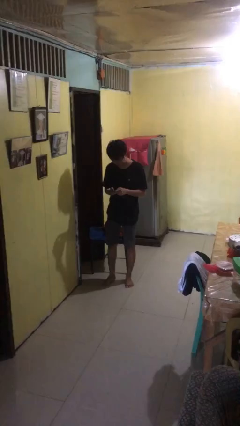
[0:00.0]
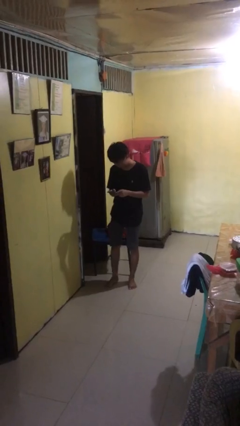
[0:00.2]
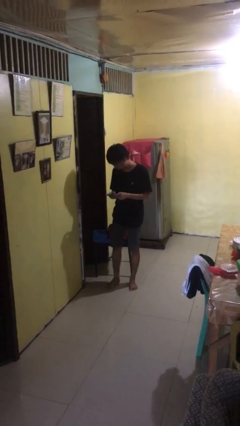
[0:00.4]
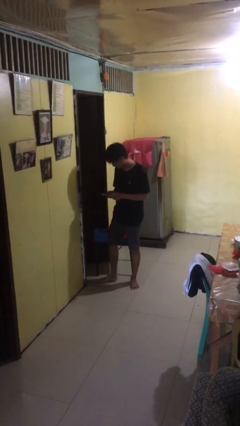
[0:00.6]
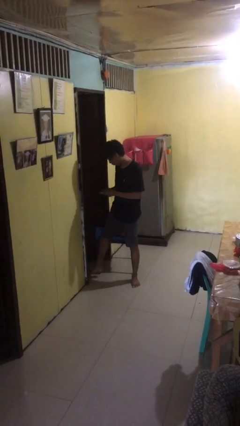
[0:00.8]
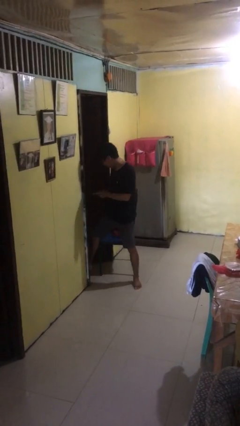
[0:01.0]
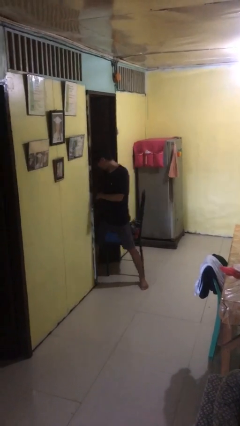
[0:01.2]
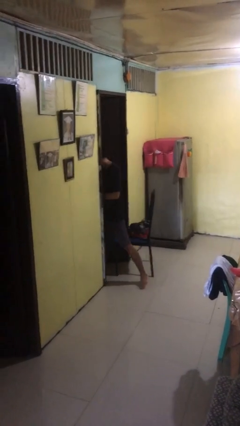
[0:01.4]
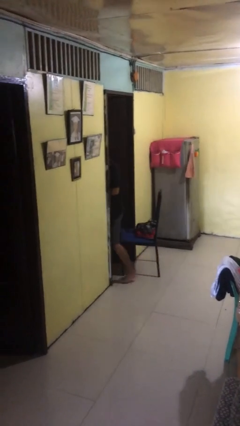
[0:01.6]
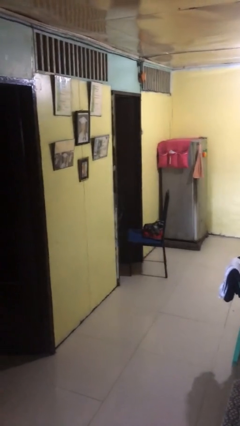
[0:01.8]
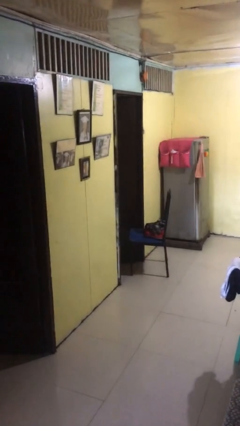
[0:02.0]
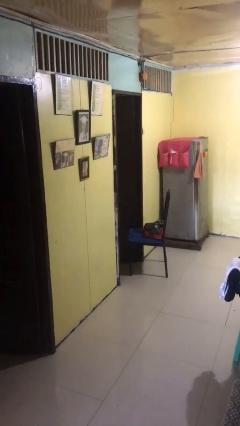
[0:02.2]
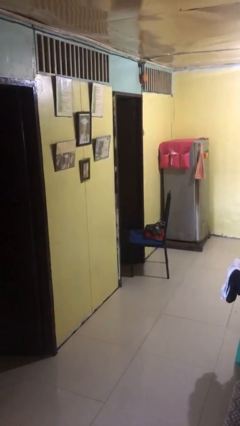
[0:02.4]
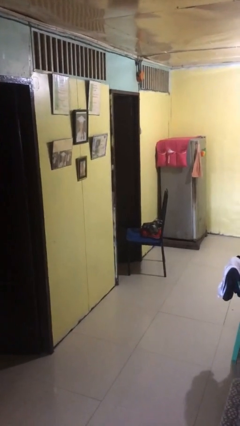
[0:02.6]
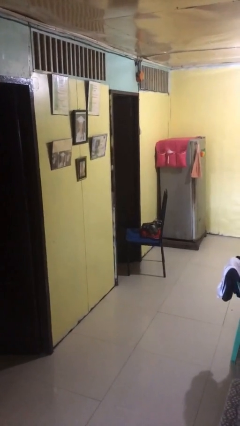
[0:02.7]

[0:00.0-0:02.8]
person exits scene through structure

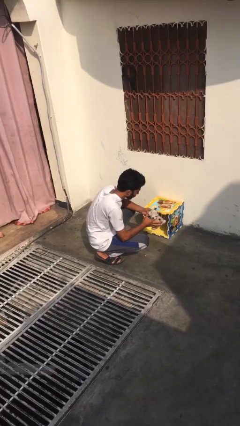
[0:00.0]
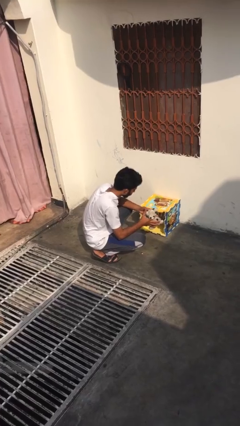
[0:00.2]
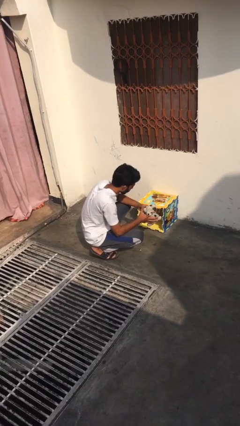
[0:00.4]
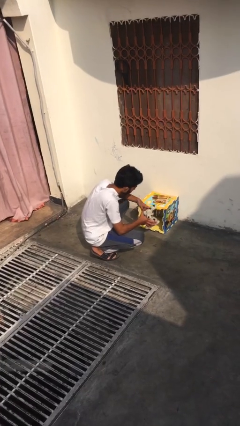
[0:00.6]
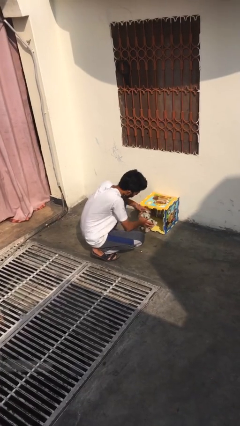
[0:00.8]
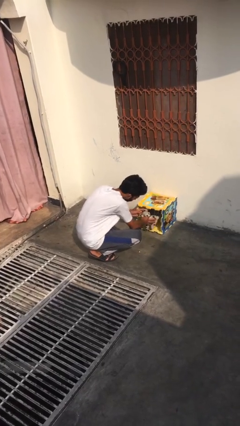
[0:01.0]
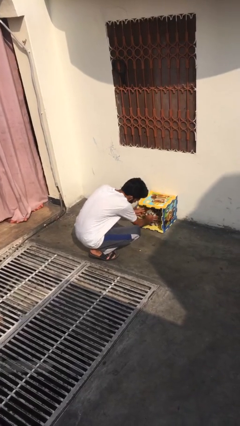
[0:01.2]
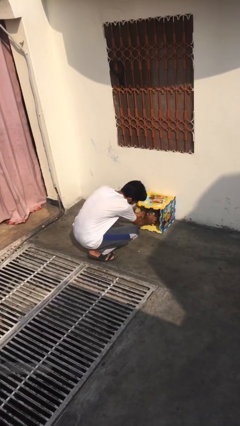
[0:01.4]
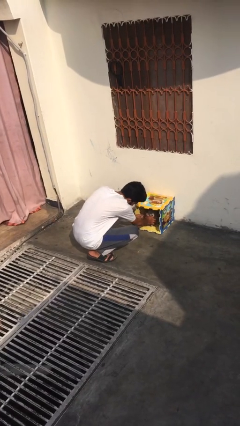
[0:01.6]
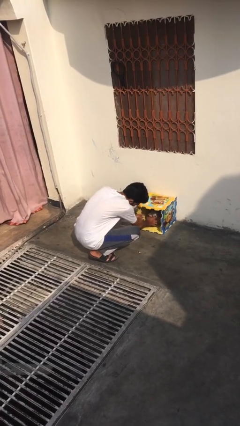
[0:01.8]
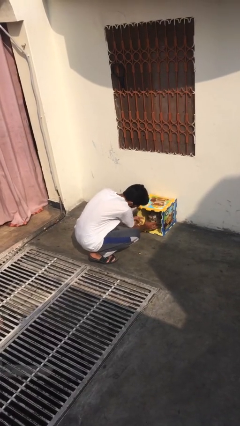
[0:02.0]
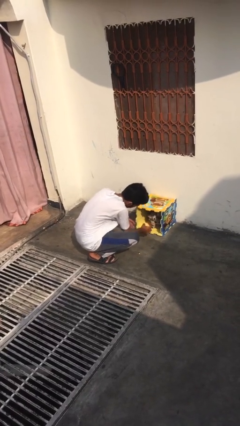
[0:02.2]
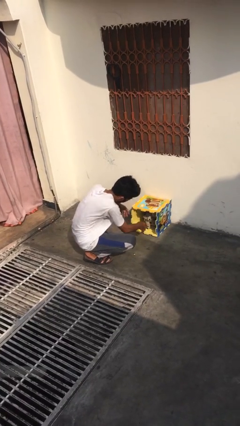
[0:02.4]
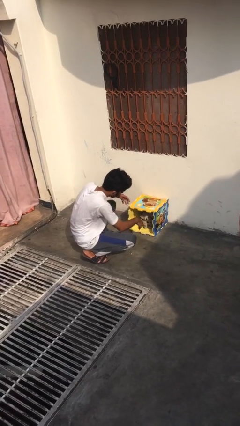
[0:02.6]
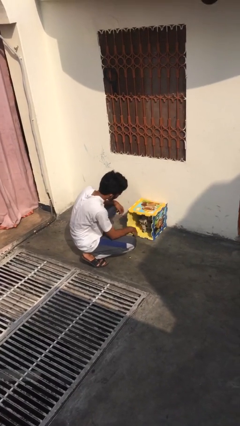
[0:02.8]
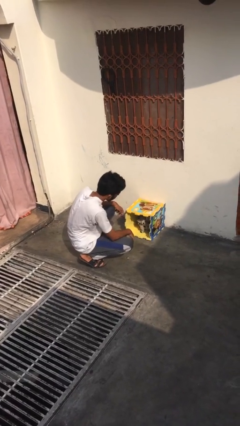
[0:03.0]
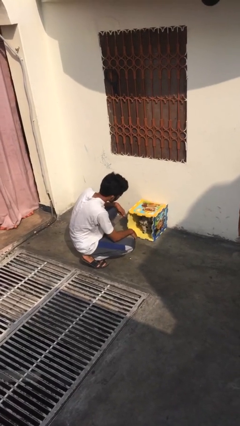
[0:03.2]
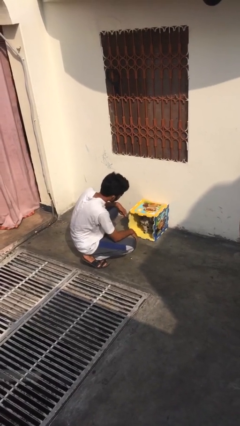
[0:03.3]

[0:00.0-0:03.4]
person crates dog

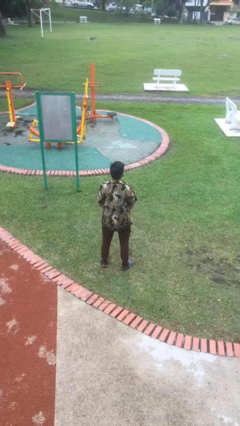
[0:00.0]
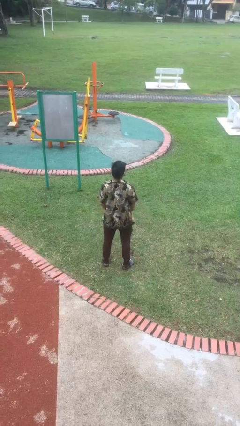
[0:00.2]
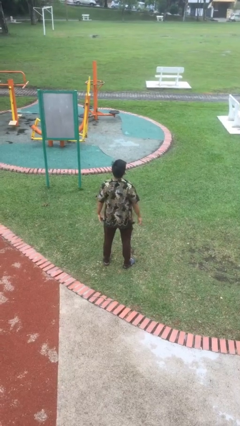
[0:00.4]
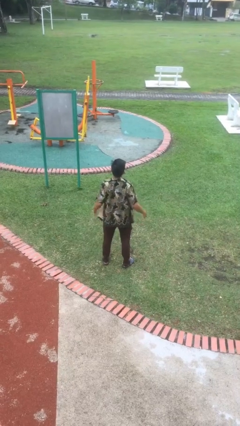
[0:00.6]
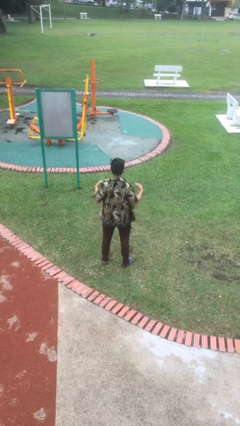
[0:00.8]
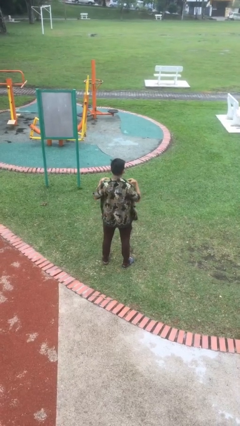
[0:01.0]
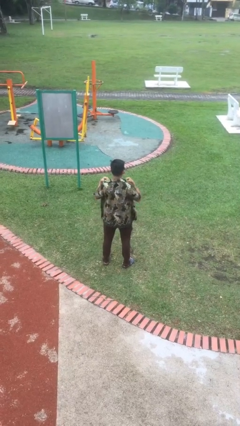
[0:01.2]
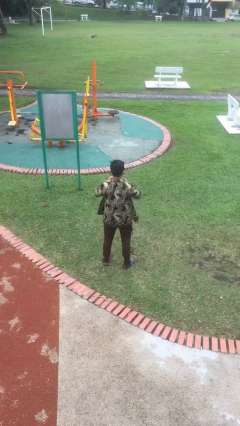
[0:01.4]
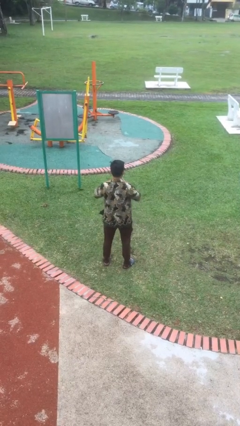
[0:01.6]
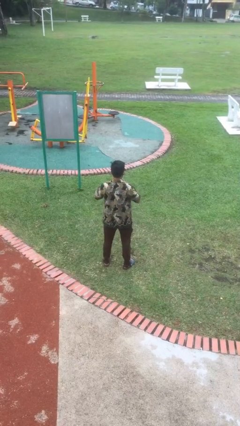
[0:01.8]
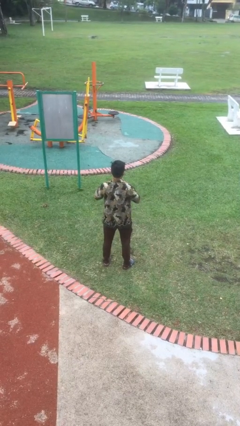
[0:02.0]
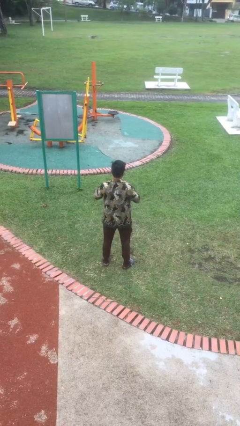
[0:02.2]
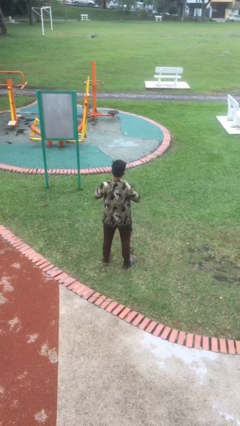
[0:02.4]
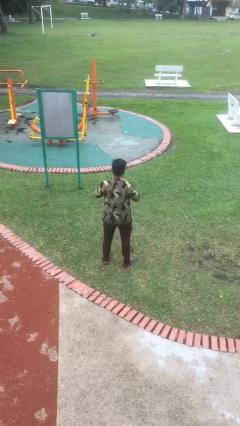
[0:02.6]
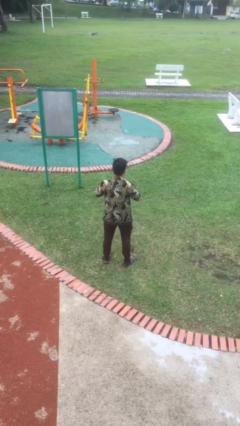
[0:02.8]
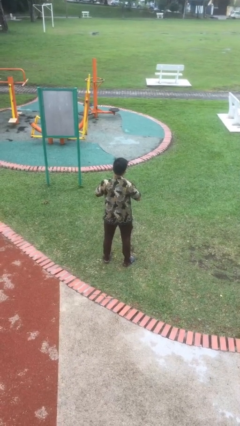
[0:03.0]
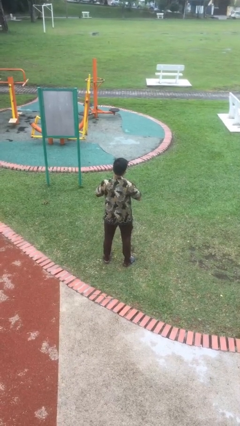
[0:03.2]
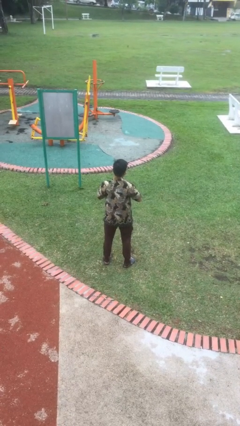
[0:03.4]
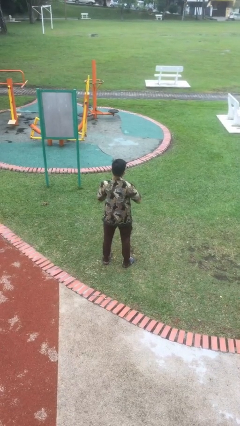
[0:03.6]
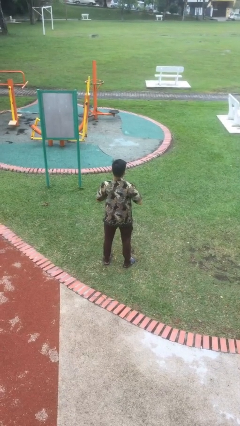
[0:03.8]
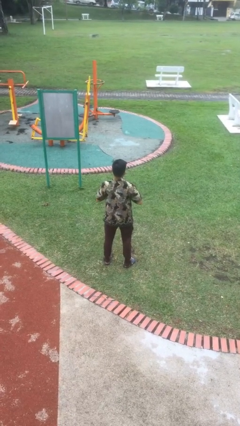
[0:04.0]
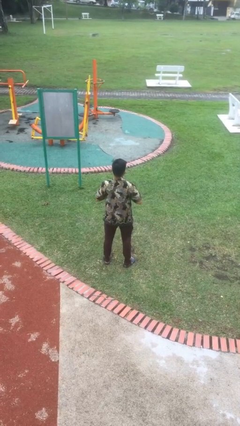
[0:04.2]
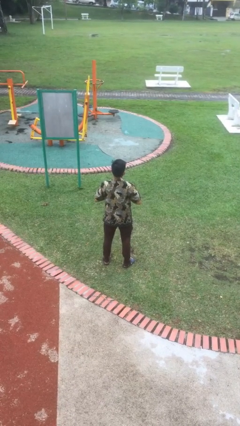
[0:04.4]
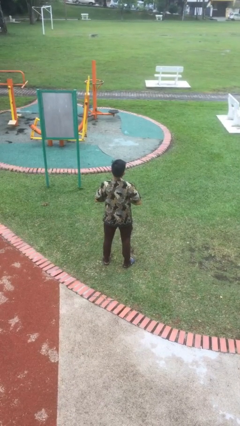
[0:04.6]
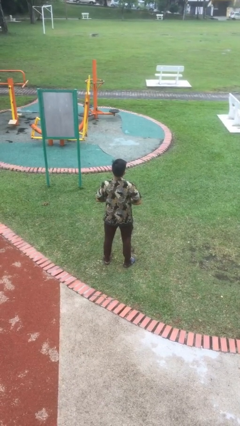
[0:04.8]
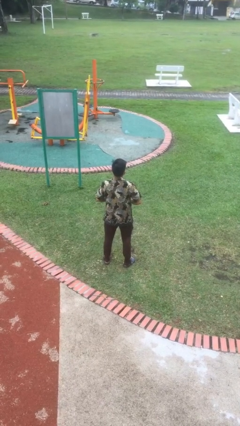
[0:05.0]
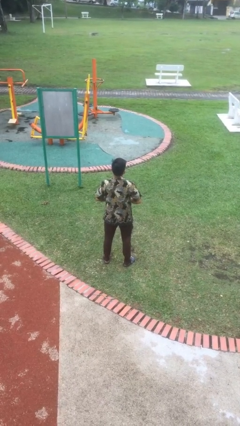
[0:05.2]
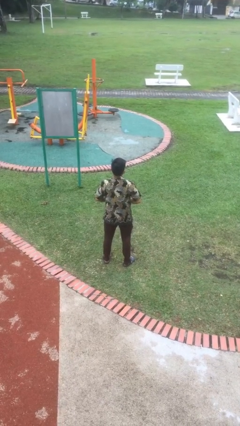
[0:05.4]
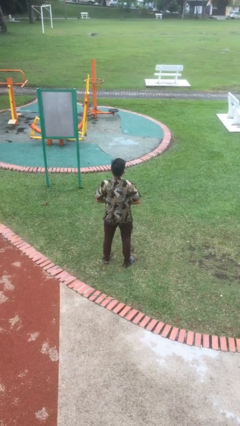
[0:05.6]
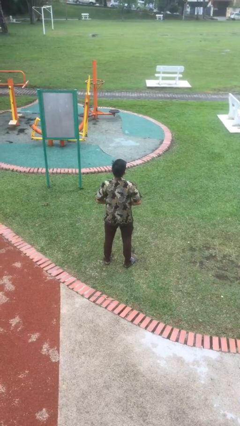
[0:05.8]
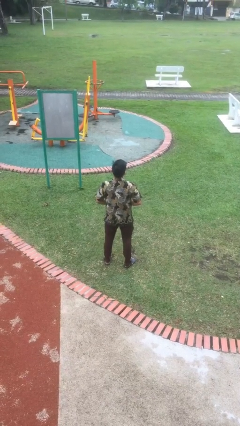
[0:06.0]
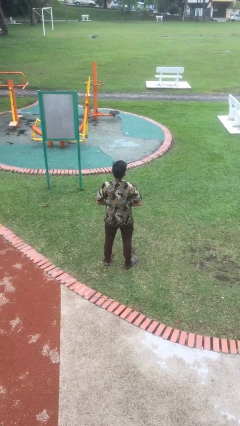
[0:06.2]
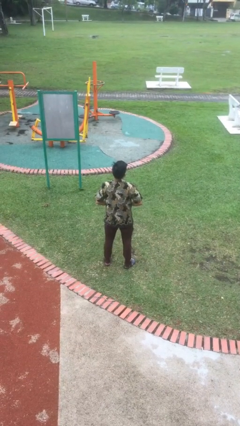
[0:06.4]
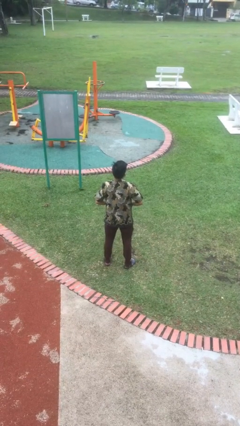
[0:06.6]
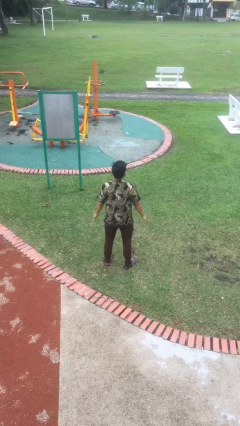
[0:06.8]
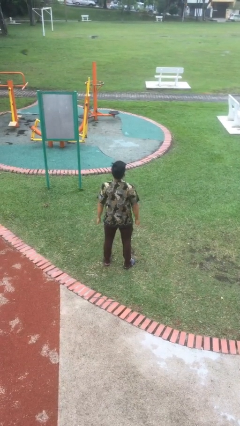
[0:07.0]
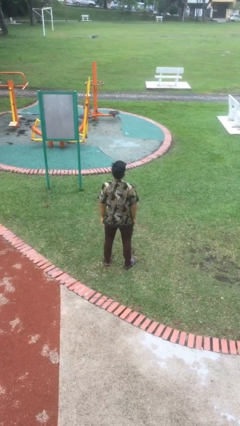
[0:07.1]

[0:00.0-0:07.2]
person buttons shirt

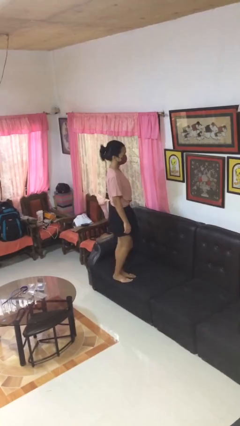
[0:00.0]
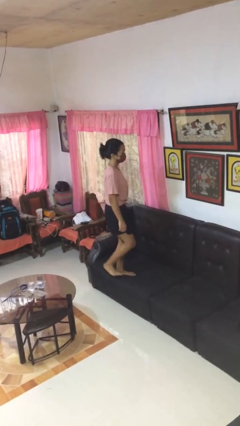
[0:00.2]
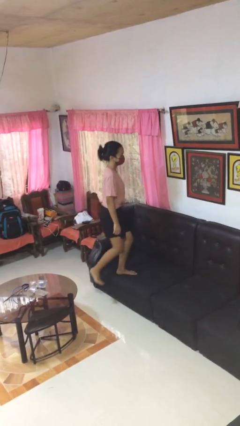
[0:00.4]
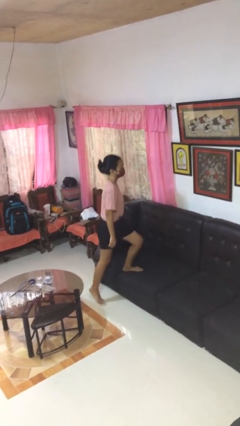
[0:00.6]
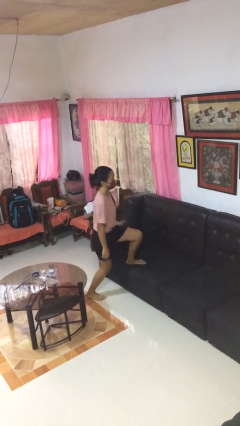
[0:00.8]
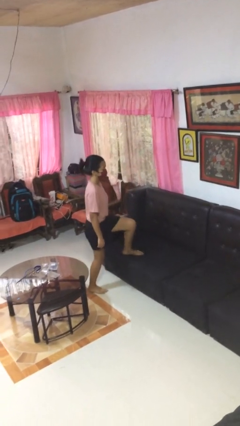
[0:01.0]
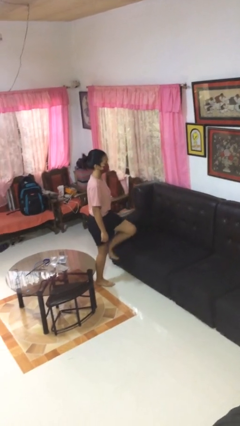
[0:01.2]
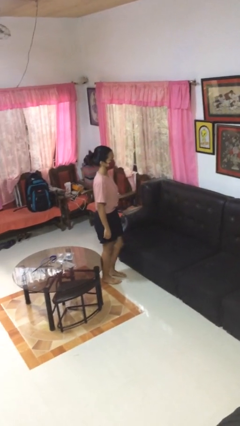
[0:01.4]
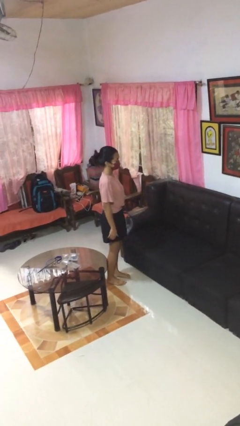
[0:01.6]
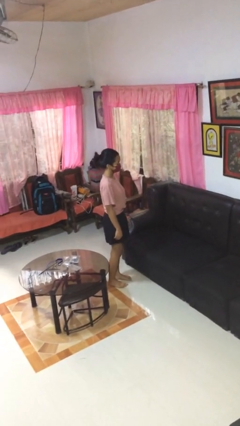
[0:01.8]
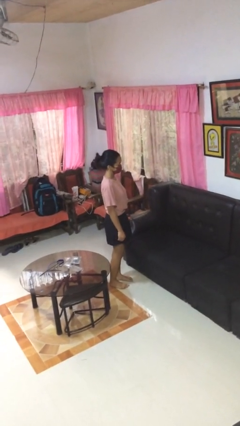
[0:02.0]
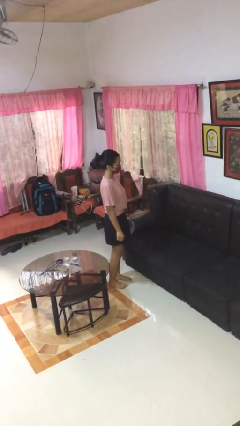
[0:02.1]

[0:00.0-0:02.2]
person climbs off couch

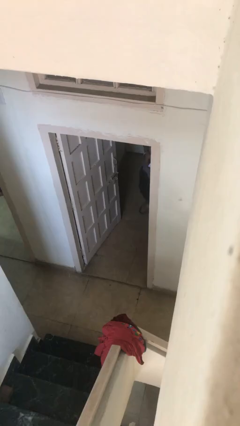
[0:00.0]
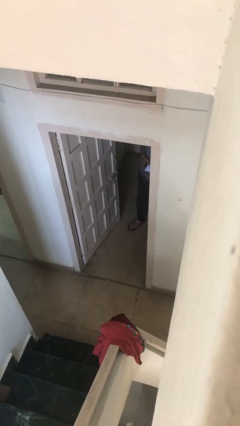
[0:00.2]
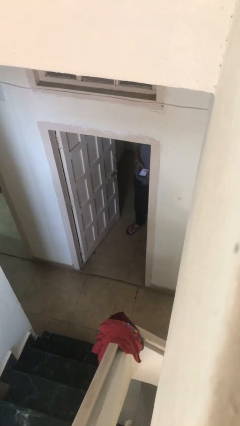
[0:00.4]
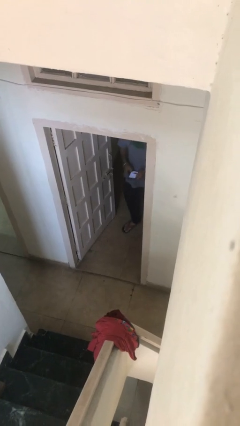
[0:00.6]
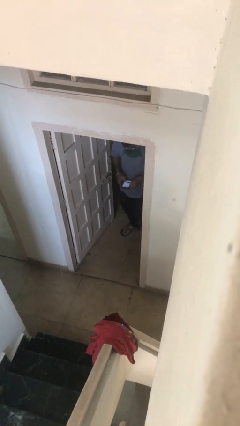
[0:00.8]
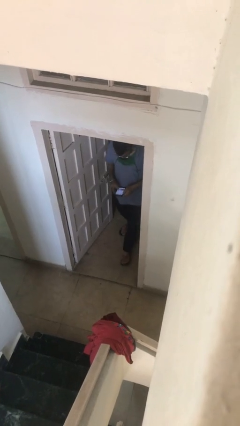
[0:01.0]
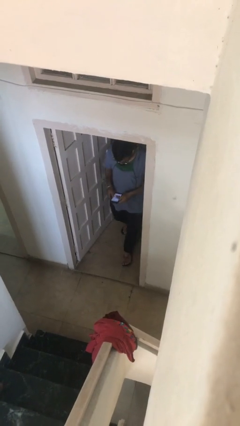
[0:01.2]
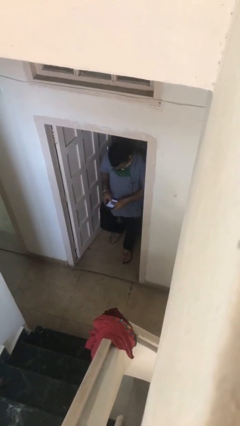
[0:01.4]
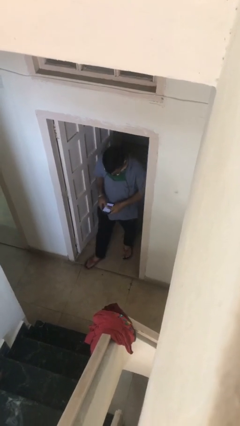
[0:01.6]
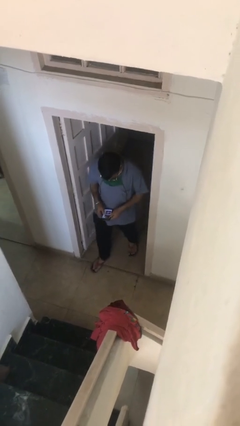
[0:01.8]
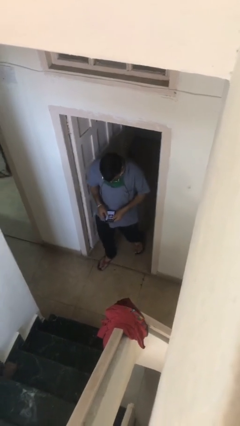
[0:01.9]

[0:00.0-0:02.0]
person enters scene through structure
